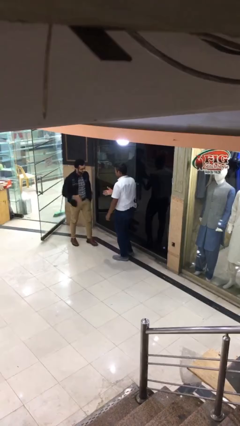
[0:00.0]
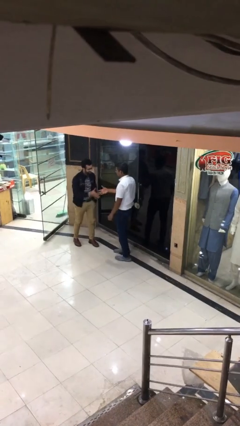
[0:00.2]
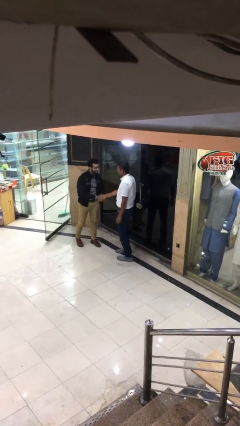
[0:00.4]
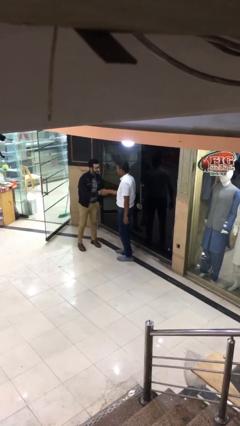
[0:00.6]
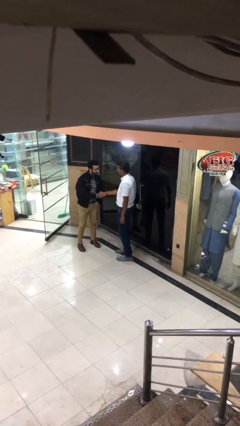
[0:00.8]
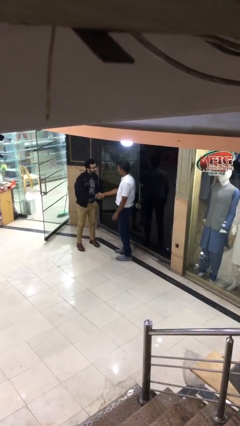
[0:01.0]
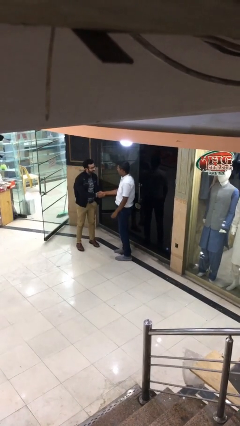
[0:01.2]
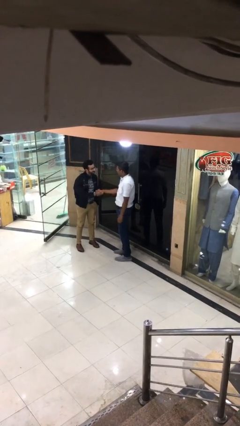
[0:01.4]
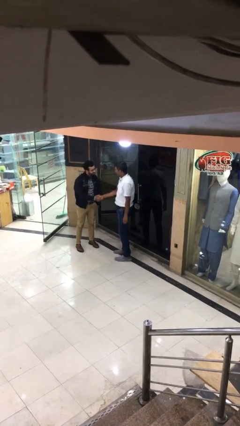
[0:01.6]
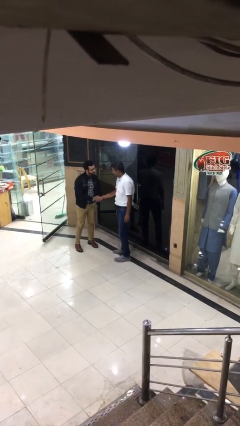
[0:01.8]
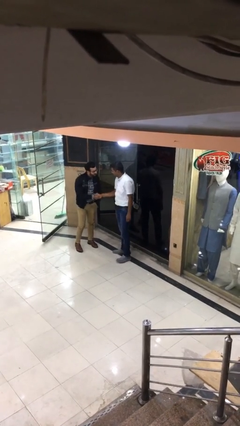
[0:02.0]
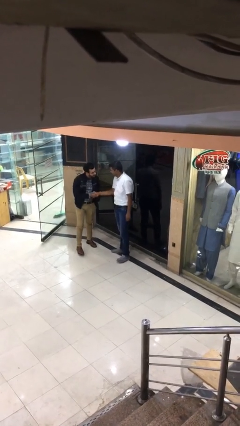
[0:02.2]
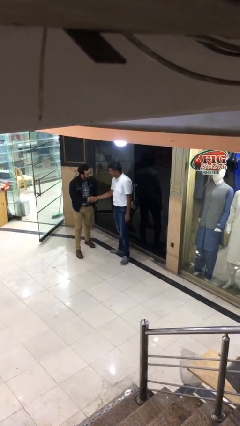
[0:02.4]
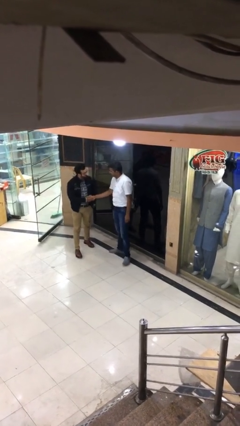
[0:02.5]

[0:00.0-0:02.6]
person shakes hand

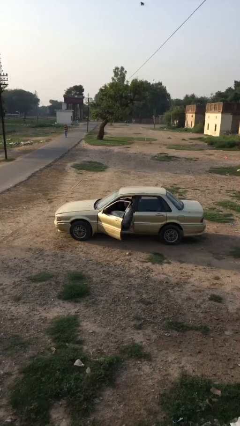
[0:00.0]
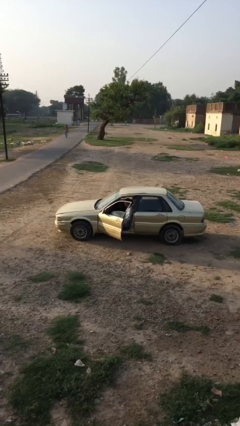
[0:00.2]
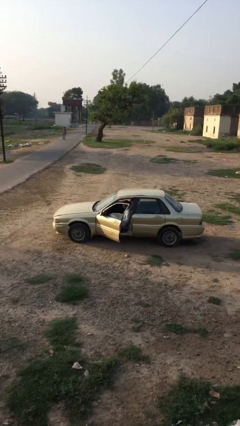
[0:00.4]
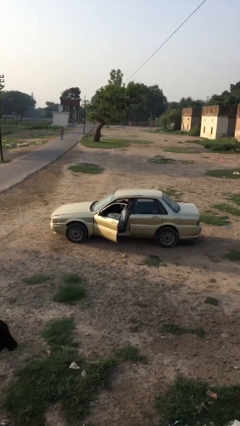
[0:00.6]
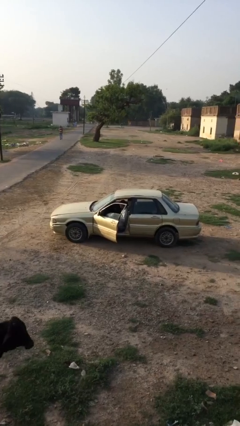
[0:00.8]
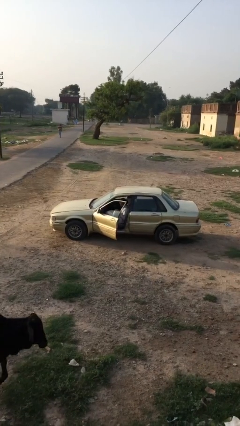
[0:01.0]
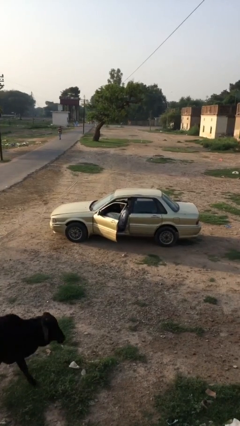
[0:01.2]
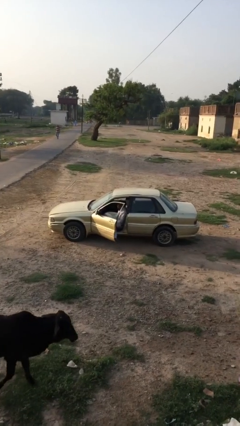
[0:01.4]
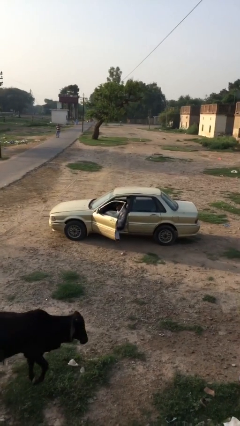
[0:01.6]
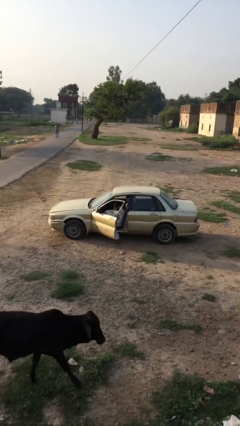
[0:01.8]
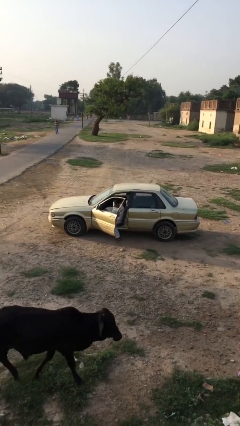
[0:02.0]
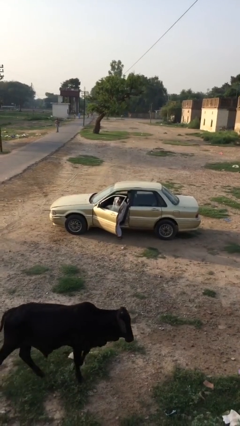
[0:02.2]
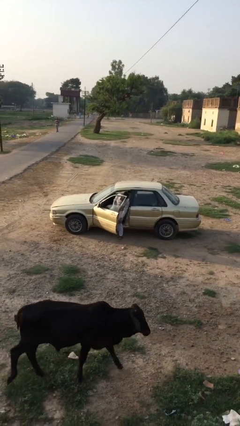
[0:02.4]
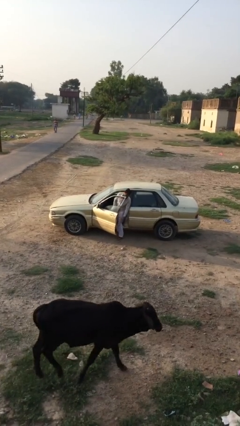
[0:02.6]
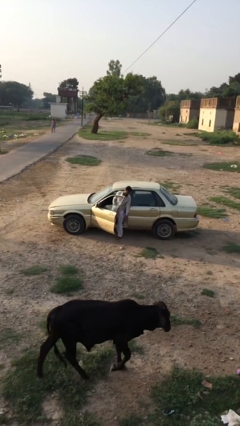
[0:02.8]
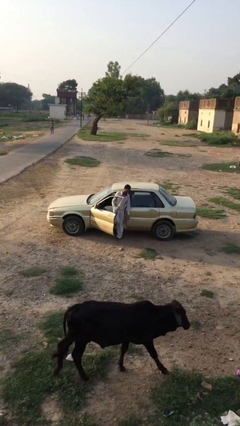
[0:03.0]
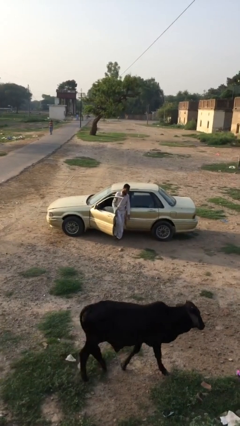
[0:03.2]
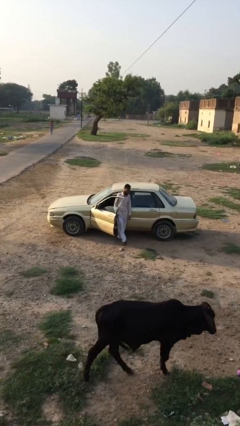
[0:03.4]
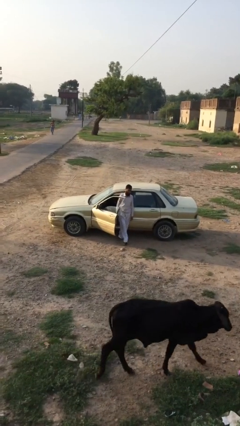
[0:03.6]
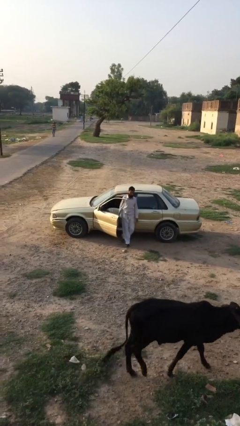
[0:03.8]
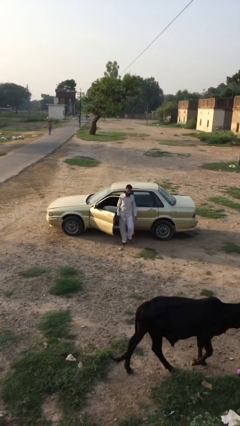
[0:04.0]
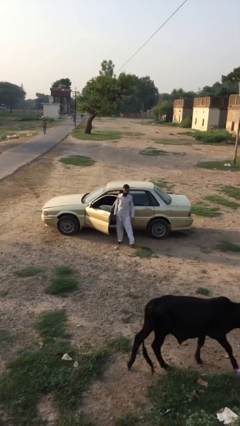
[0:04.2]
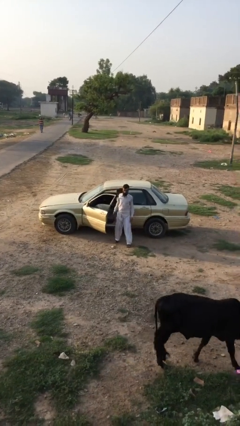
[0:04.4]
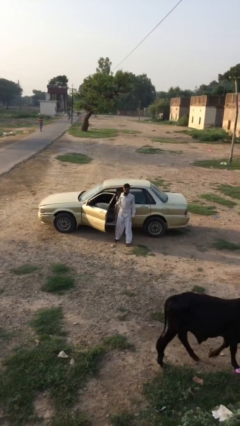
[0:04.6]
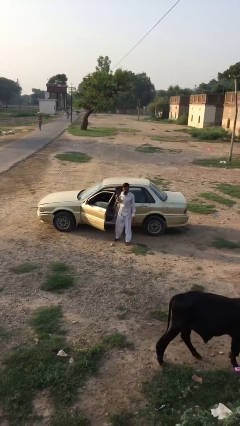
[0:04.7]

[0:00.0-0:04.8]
person exits car

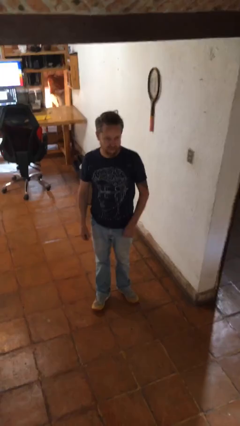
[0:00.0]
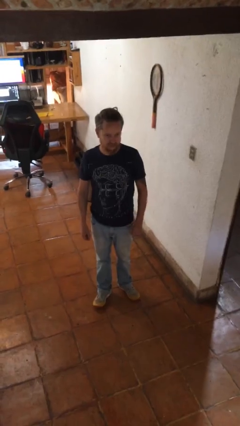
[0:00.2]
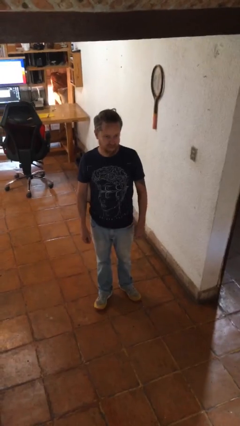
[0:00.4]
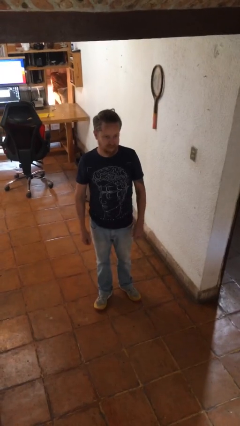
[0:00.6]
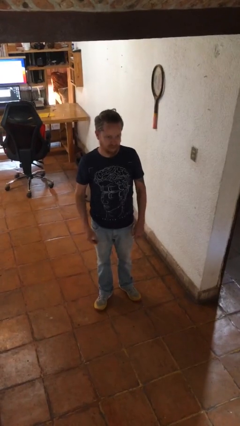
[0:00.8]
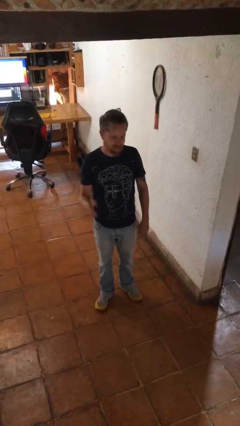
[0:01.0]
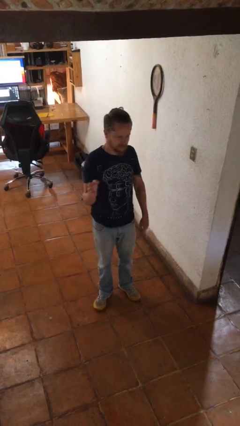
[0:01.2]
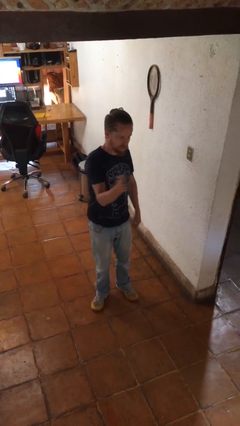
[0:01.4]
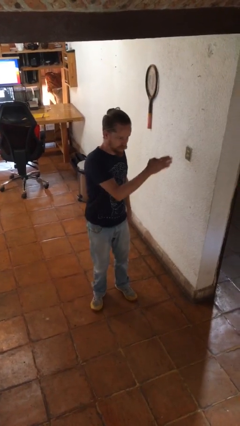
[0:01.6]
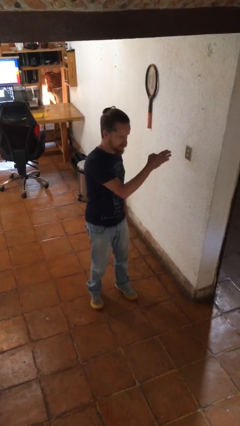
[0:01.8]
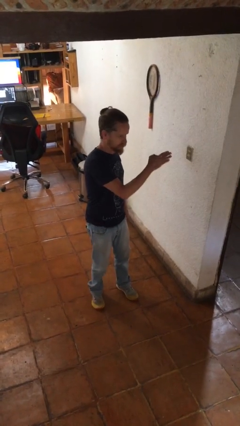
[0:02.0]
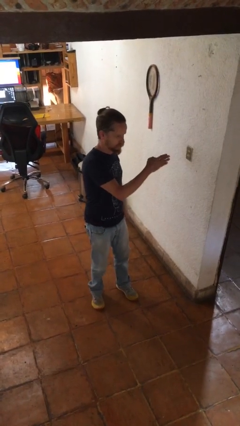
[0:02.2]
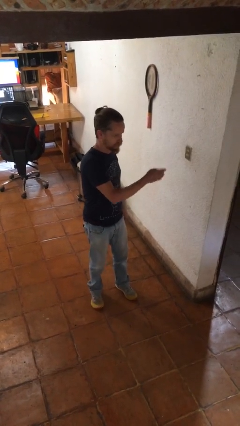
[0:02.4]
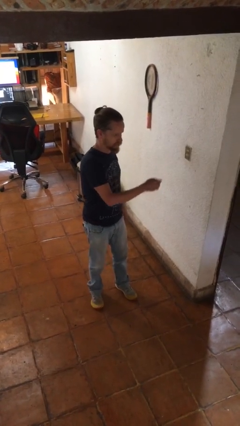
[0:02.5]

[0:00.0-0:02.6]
person gestures swipe left

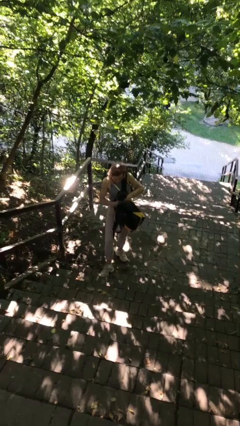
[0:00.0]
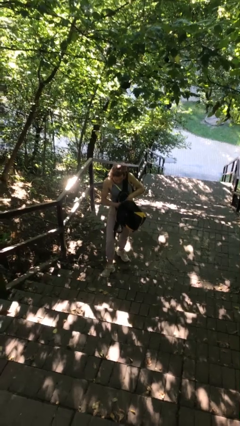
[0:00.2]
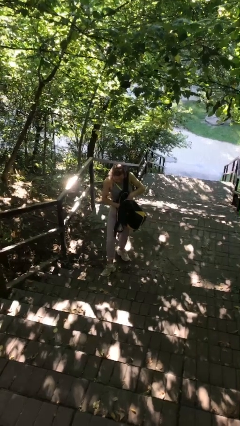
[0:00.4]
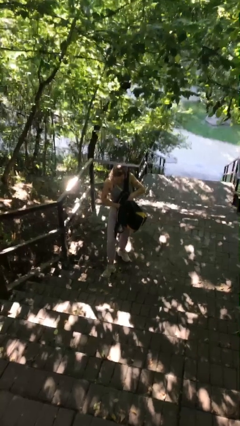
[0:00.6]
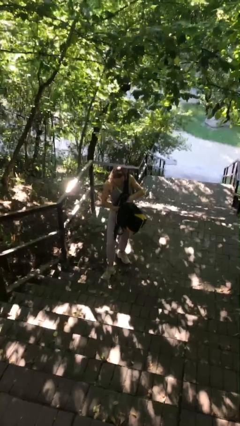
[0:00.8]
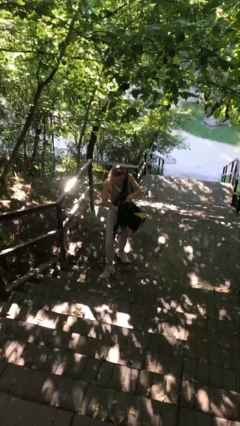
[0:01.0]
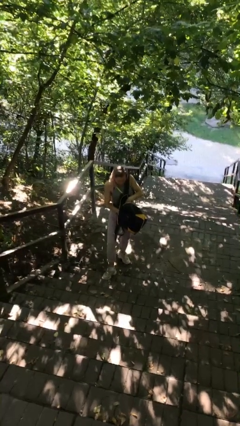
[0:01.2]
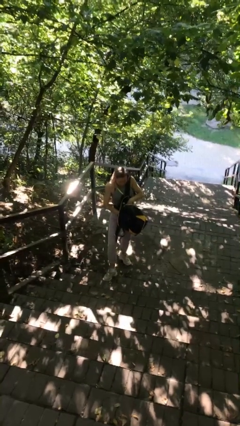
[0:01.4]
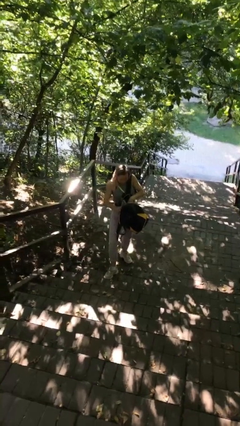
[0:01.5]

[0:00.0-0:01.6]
person searches in backpack

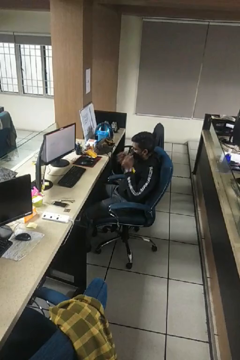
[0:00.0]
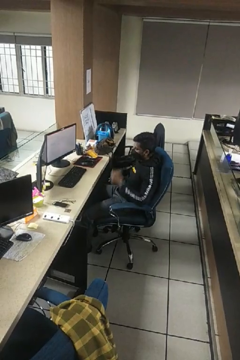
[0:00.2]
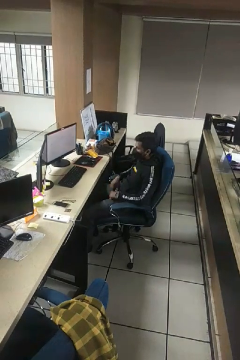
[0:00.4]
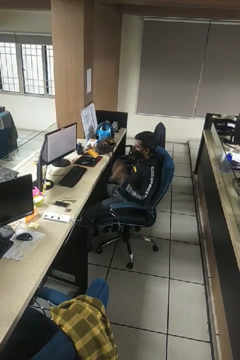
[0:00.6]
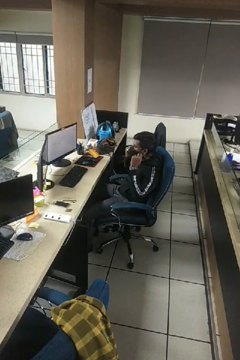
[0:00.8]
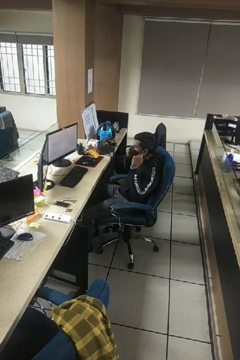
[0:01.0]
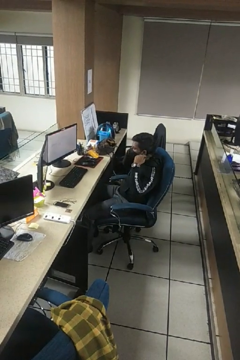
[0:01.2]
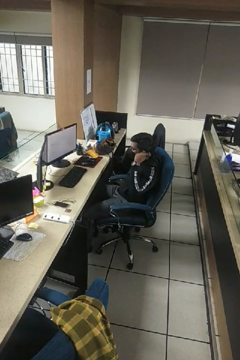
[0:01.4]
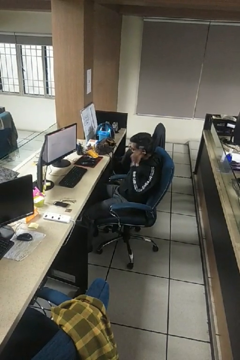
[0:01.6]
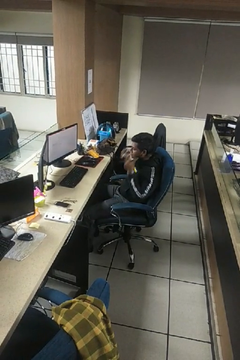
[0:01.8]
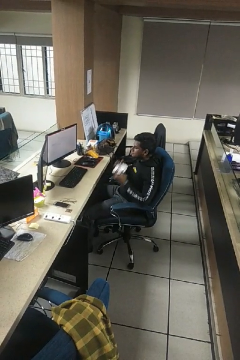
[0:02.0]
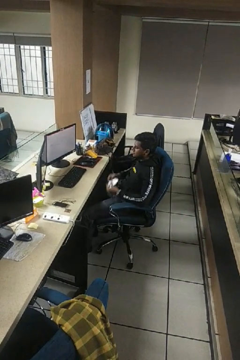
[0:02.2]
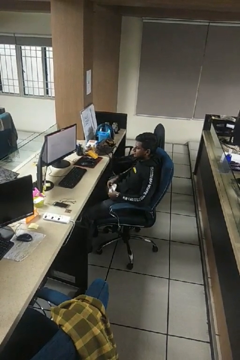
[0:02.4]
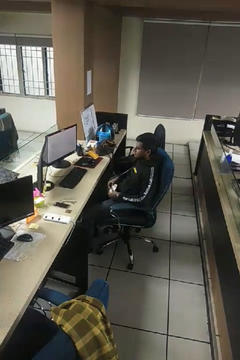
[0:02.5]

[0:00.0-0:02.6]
person takes off facemask

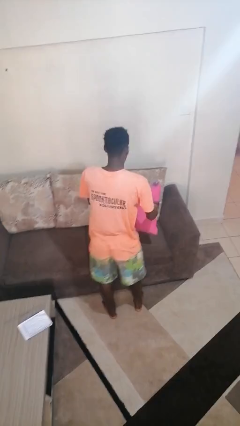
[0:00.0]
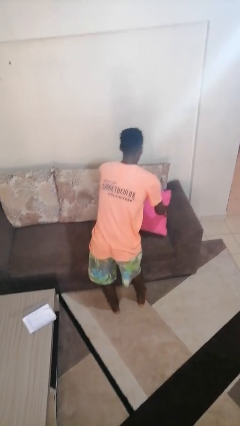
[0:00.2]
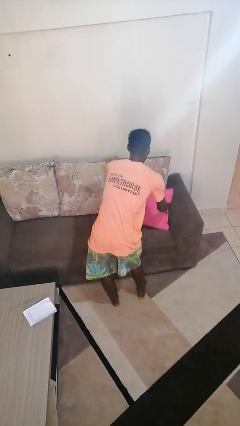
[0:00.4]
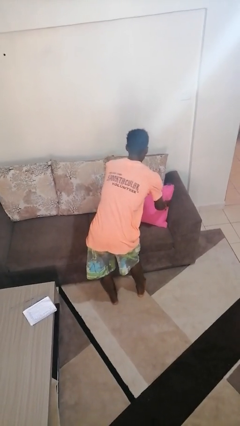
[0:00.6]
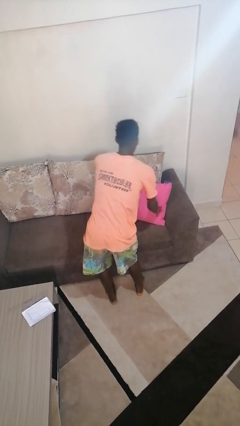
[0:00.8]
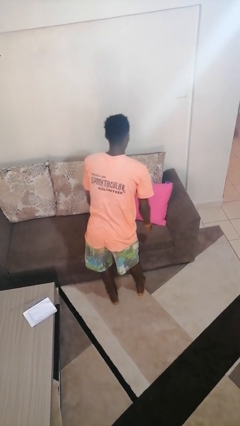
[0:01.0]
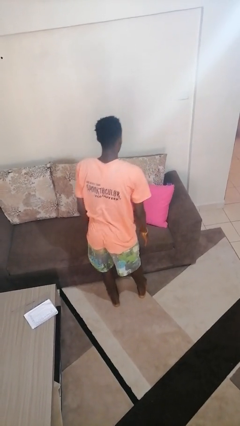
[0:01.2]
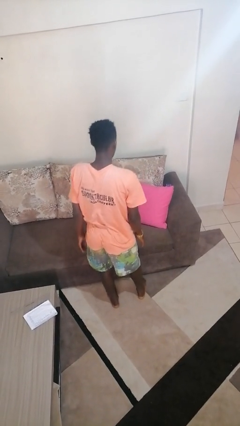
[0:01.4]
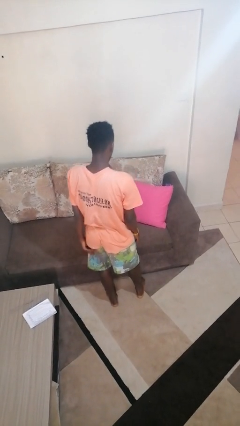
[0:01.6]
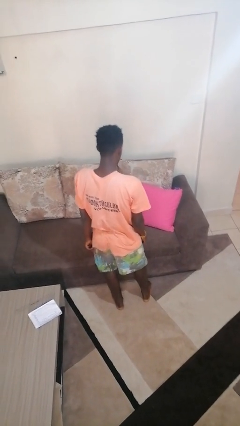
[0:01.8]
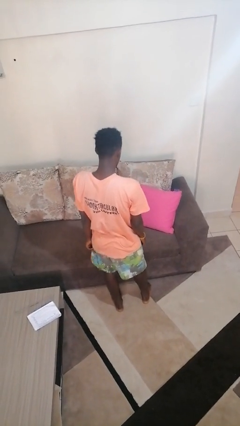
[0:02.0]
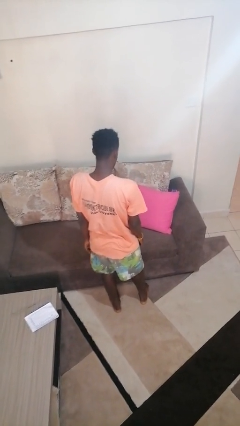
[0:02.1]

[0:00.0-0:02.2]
person puts down object on couch

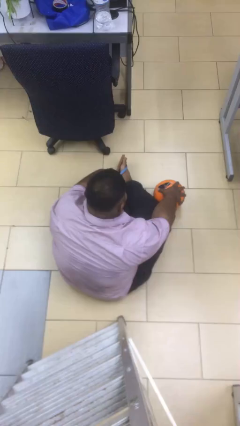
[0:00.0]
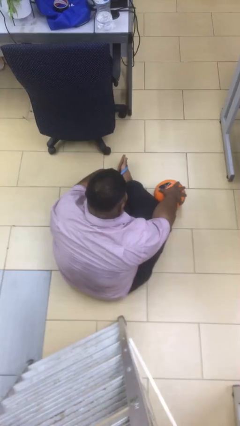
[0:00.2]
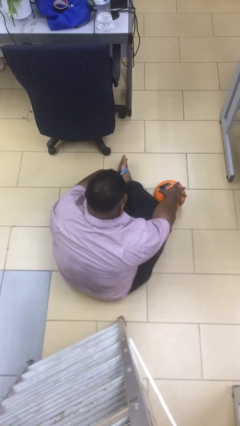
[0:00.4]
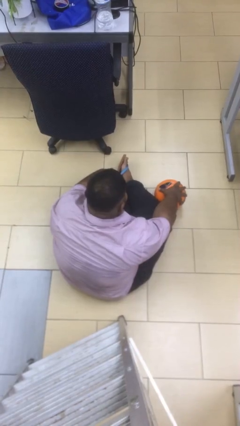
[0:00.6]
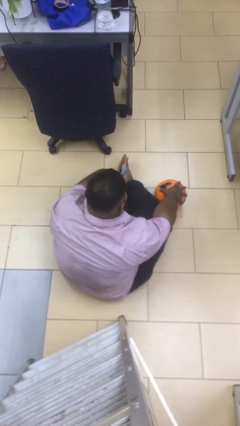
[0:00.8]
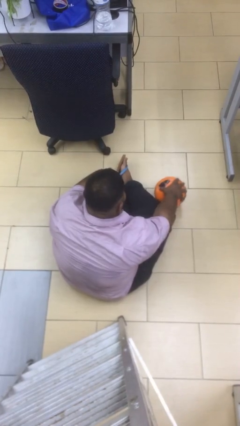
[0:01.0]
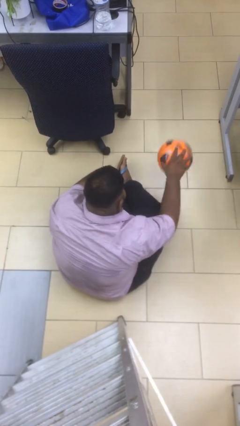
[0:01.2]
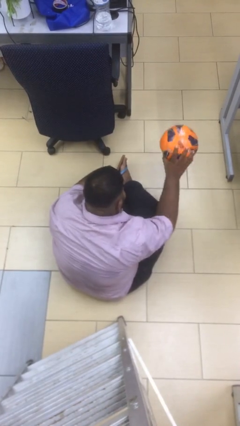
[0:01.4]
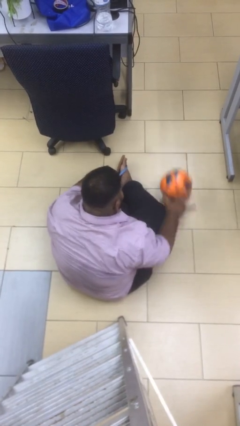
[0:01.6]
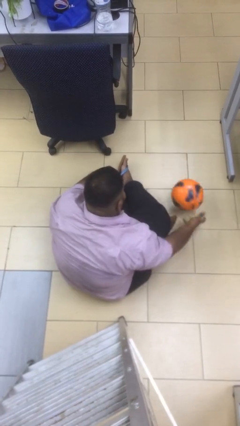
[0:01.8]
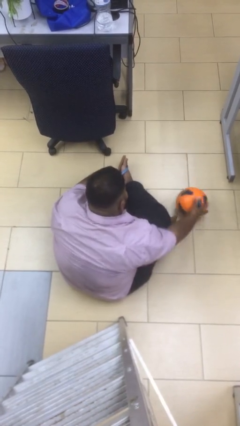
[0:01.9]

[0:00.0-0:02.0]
person bounces ball on floor
